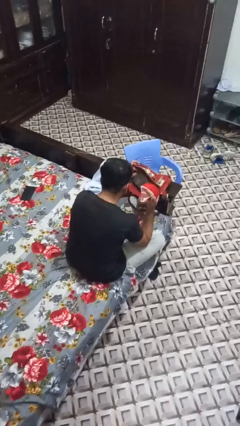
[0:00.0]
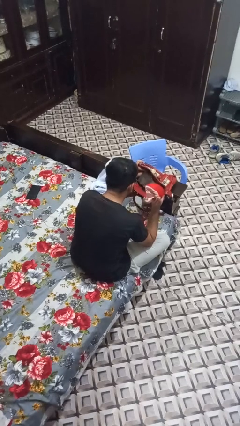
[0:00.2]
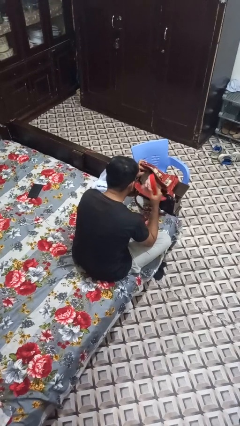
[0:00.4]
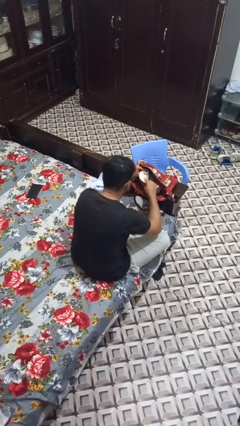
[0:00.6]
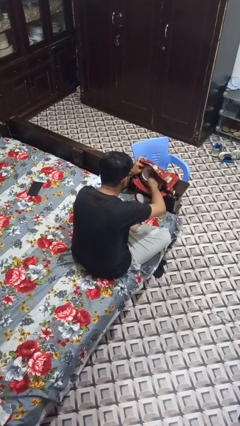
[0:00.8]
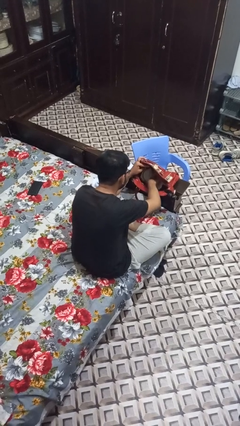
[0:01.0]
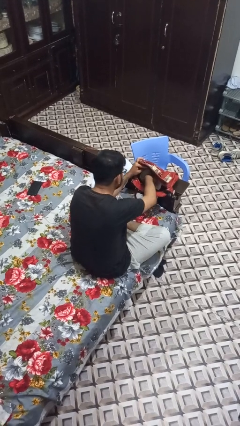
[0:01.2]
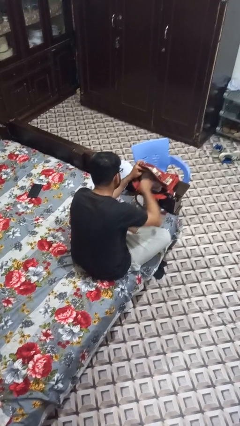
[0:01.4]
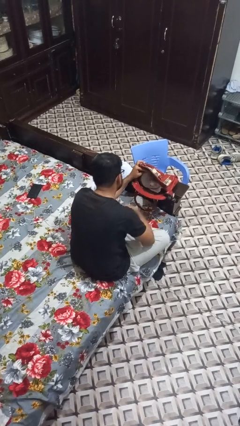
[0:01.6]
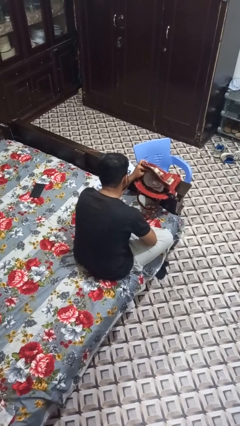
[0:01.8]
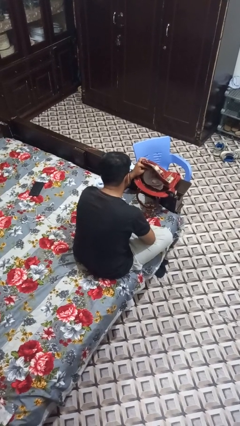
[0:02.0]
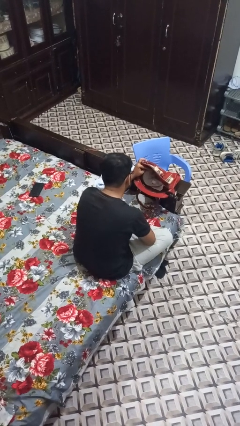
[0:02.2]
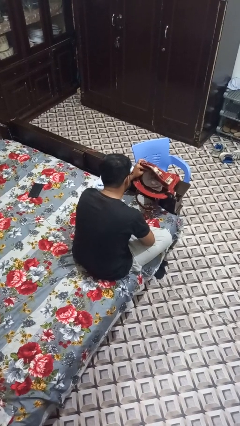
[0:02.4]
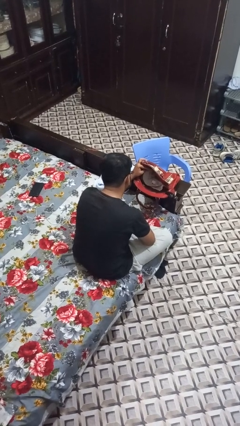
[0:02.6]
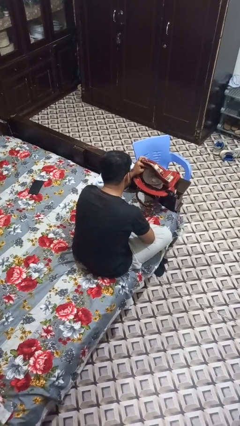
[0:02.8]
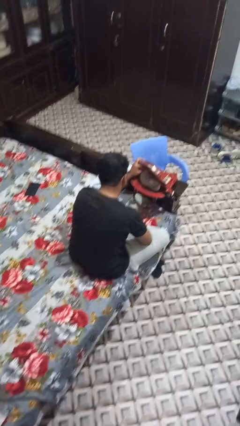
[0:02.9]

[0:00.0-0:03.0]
person puts object into purse

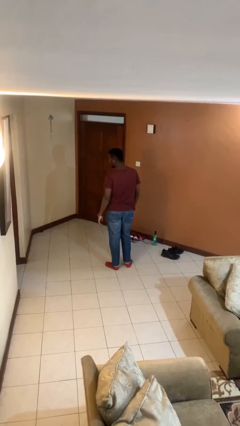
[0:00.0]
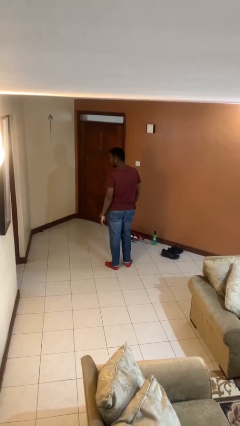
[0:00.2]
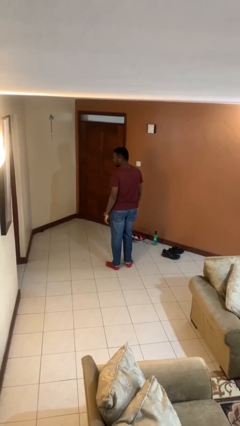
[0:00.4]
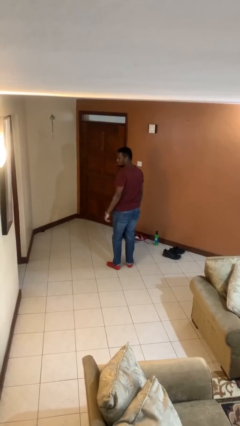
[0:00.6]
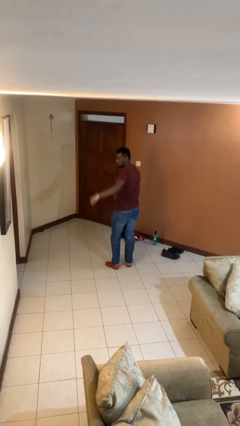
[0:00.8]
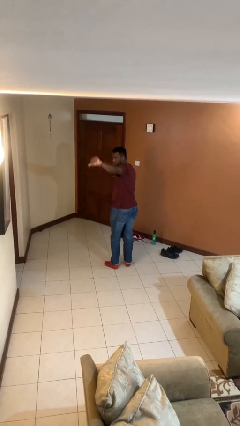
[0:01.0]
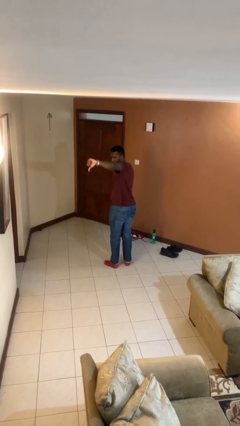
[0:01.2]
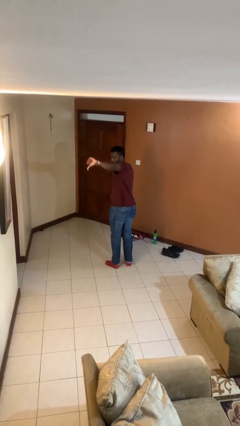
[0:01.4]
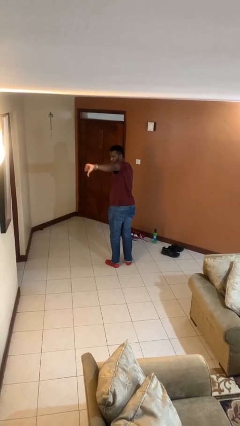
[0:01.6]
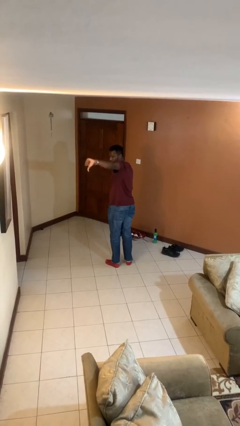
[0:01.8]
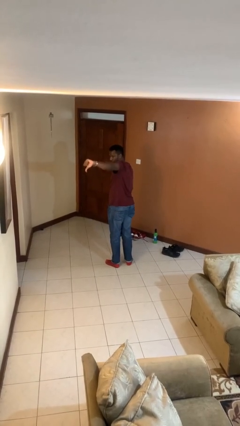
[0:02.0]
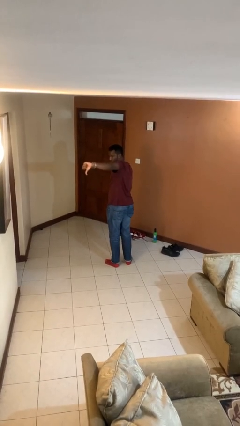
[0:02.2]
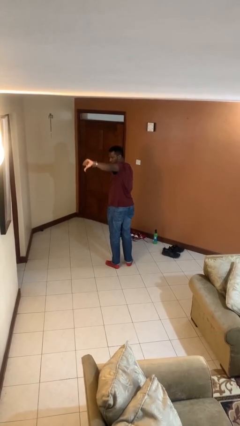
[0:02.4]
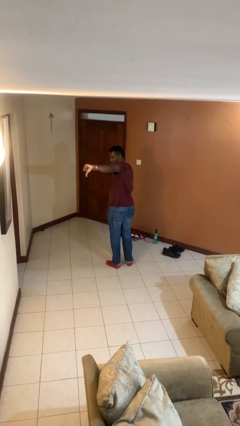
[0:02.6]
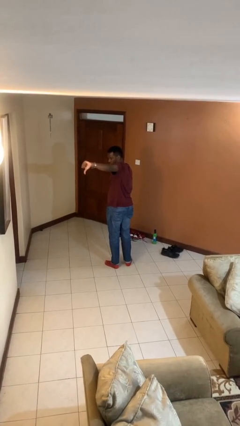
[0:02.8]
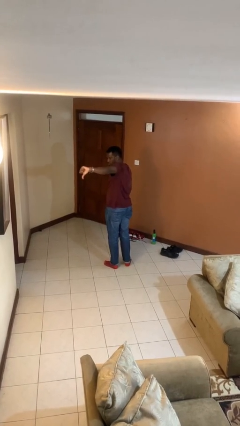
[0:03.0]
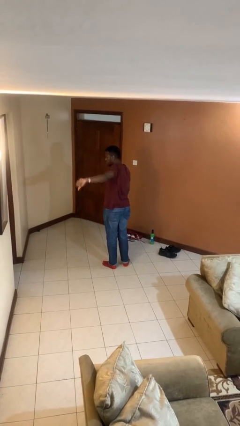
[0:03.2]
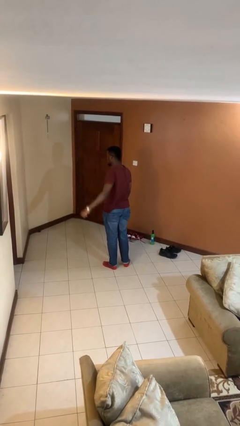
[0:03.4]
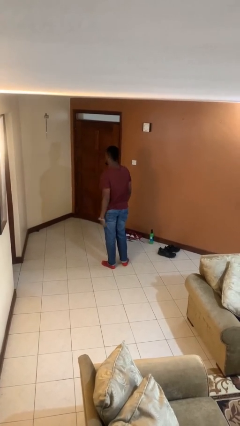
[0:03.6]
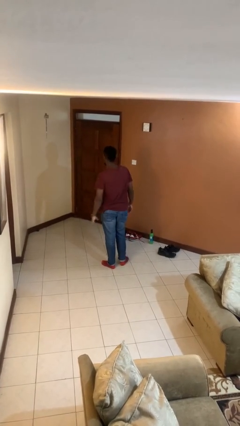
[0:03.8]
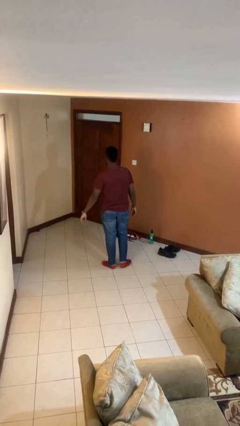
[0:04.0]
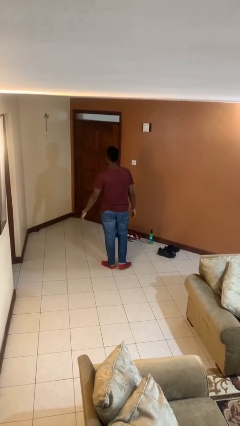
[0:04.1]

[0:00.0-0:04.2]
person gestures thumbs down

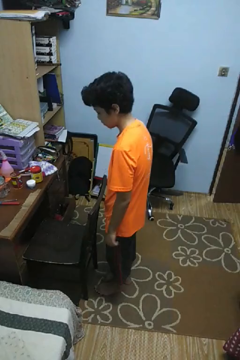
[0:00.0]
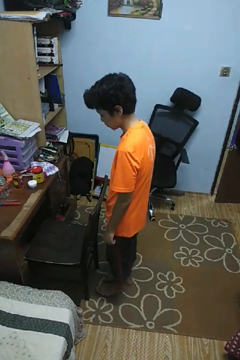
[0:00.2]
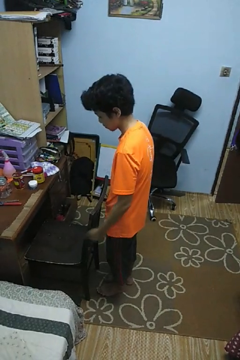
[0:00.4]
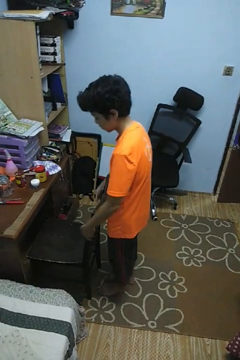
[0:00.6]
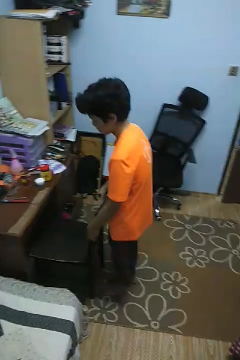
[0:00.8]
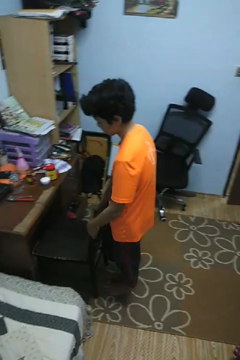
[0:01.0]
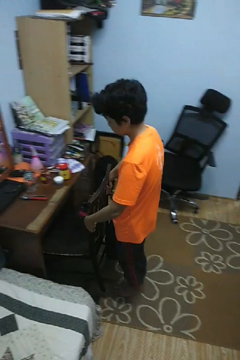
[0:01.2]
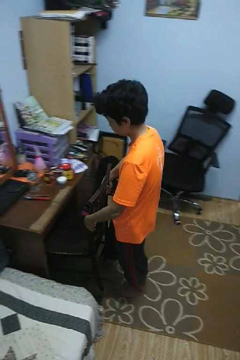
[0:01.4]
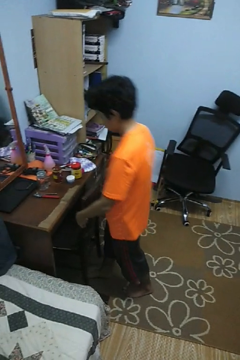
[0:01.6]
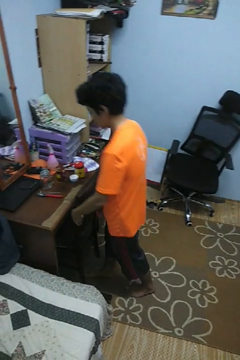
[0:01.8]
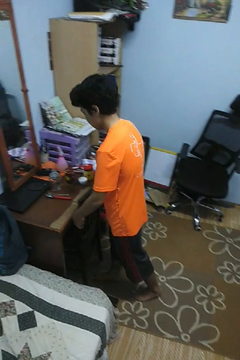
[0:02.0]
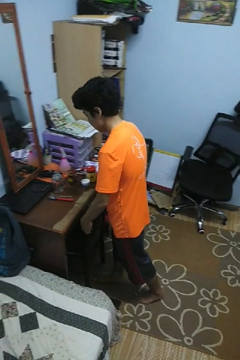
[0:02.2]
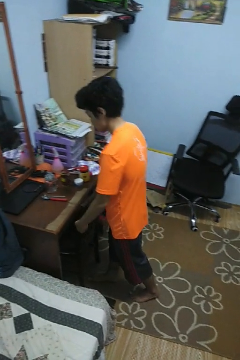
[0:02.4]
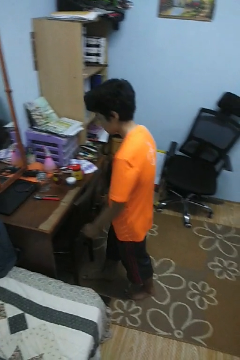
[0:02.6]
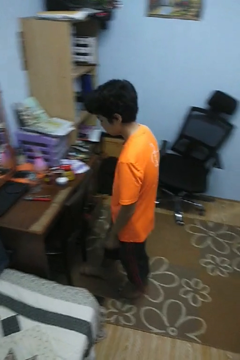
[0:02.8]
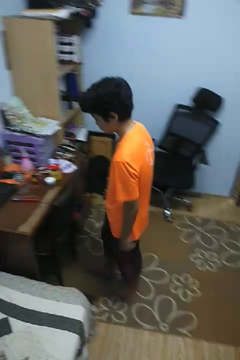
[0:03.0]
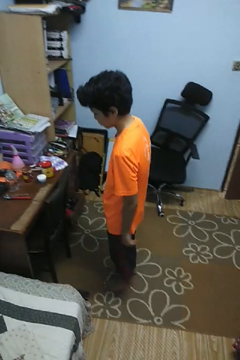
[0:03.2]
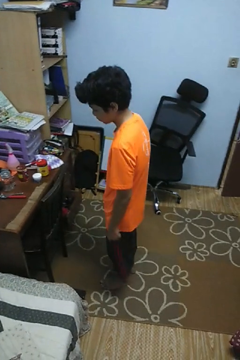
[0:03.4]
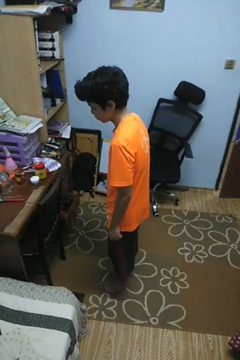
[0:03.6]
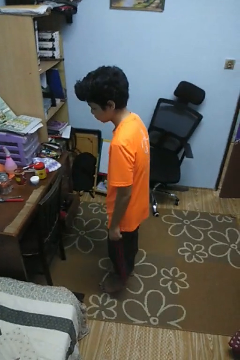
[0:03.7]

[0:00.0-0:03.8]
person pushes in chair

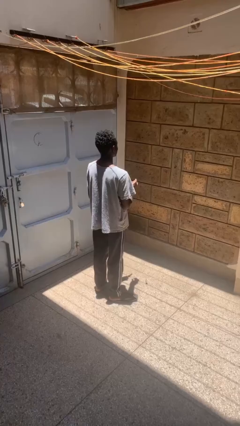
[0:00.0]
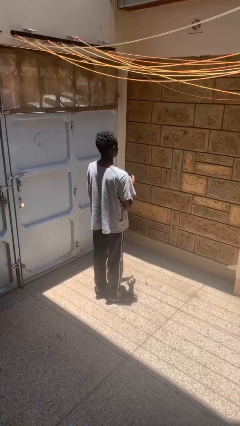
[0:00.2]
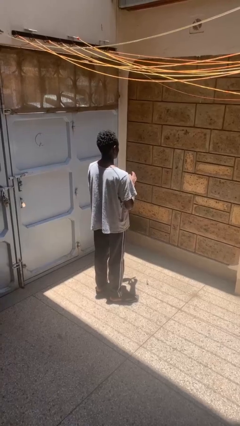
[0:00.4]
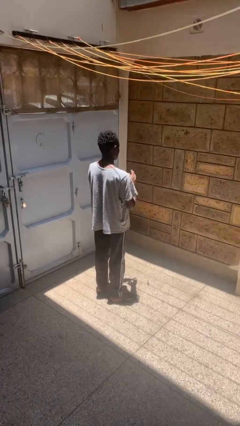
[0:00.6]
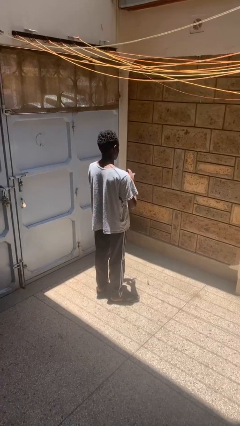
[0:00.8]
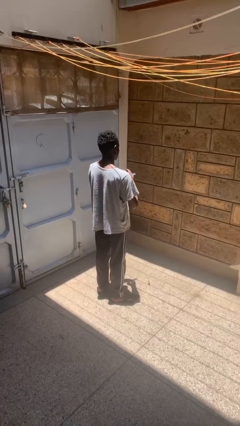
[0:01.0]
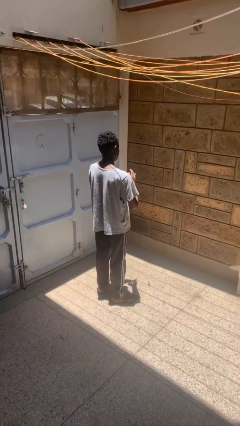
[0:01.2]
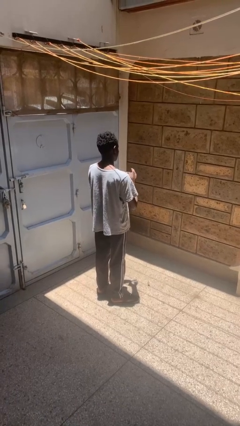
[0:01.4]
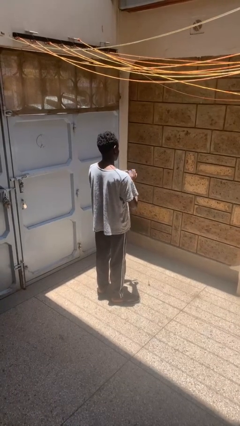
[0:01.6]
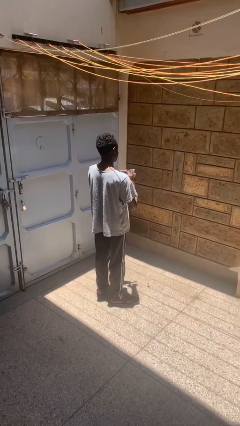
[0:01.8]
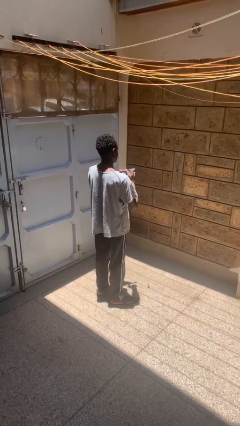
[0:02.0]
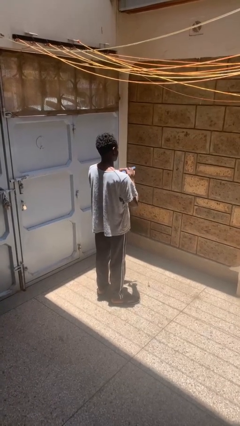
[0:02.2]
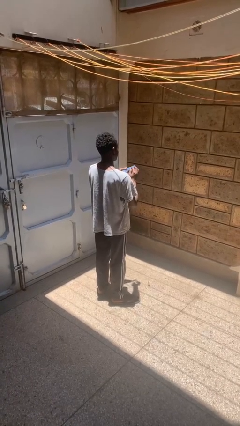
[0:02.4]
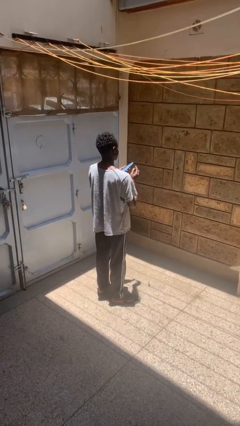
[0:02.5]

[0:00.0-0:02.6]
person files fingernails

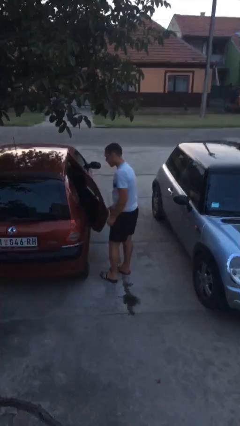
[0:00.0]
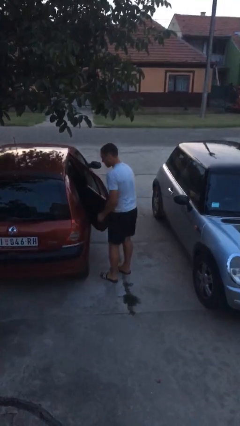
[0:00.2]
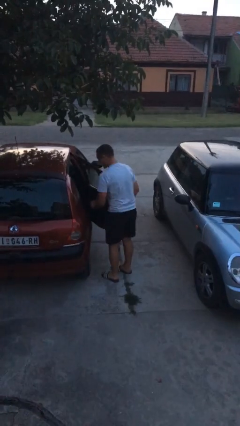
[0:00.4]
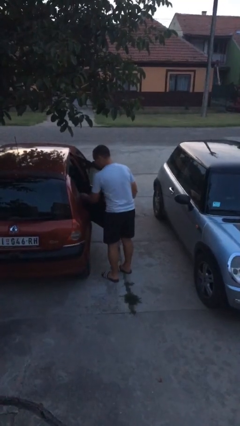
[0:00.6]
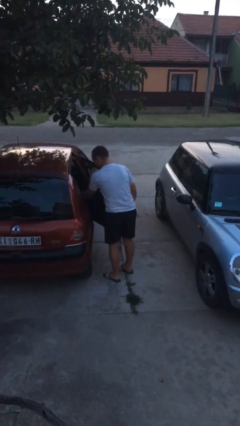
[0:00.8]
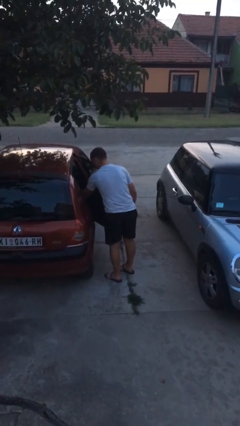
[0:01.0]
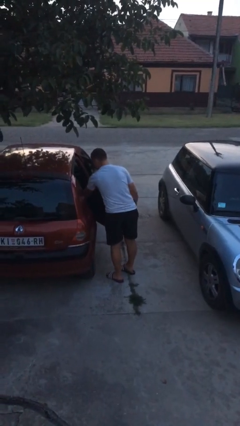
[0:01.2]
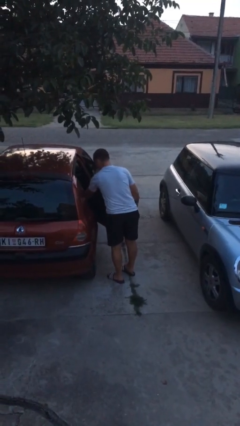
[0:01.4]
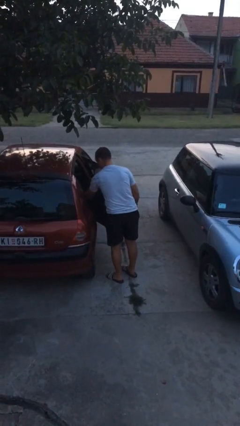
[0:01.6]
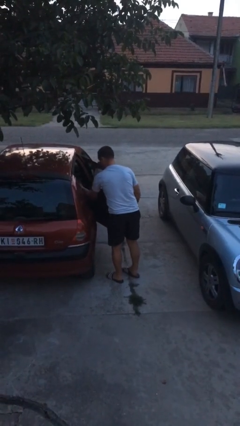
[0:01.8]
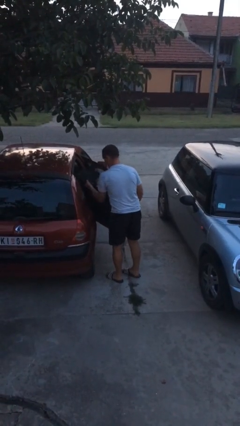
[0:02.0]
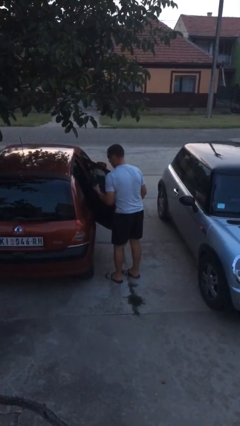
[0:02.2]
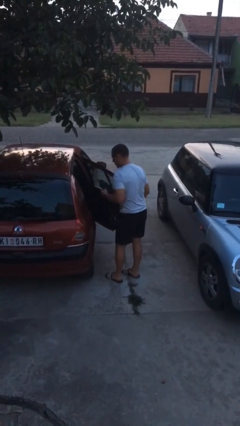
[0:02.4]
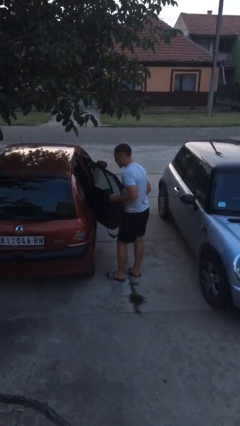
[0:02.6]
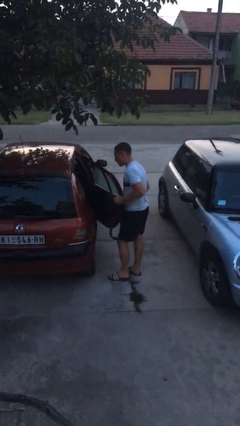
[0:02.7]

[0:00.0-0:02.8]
person unloads car

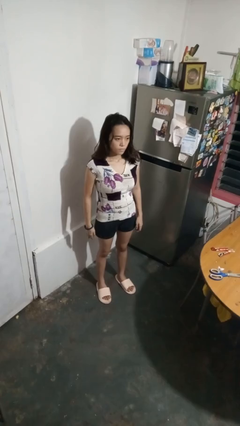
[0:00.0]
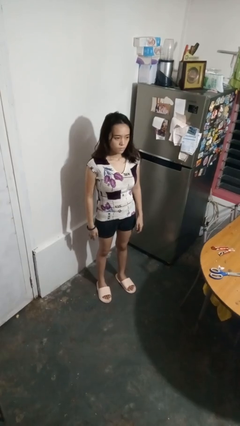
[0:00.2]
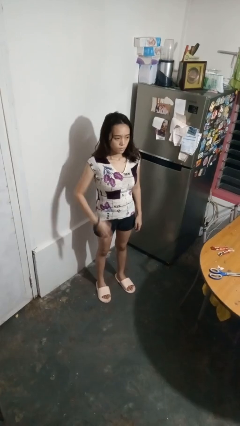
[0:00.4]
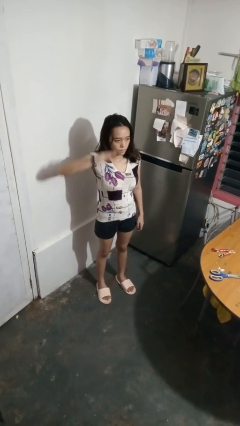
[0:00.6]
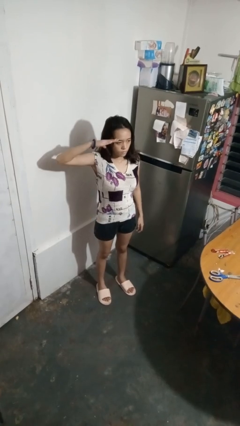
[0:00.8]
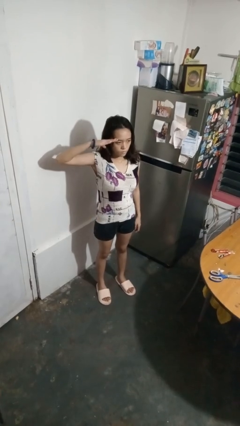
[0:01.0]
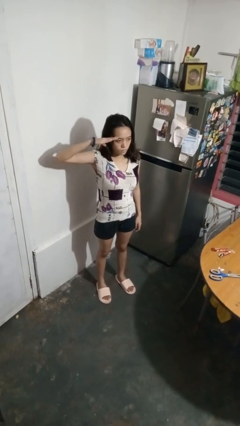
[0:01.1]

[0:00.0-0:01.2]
person salutes

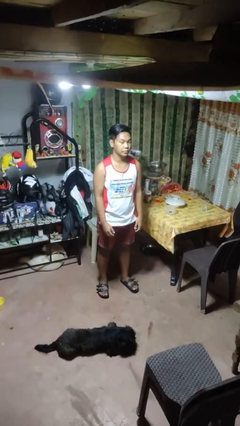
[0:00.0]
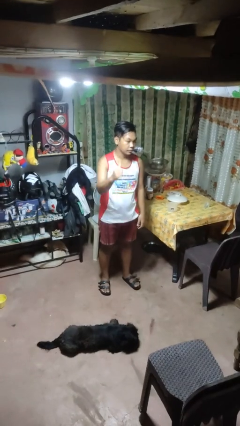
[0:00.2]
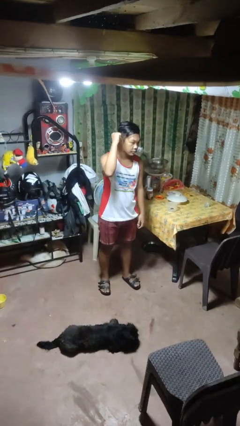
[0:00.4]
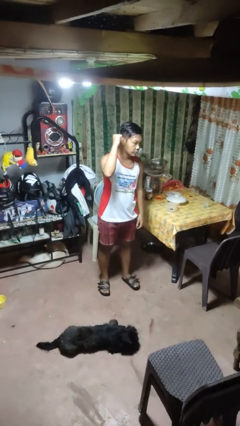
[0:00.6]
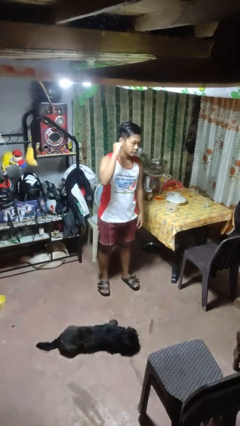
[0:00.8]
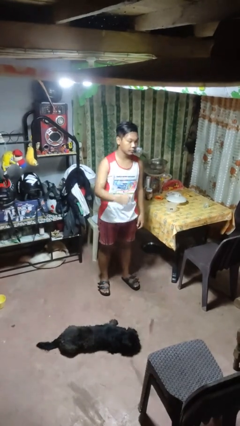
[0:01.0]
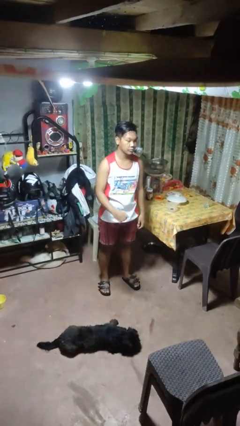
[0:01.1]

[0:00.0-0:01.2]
person gestures behind me
